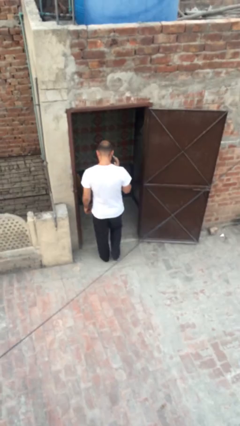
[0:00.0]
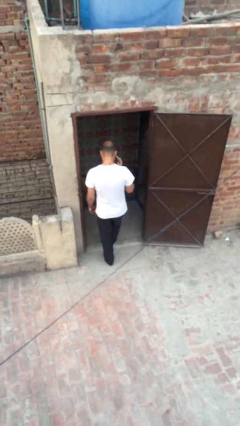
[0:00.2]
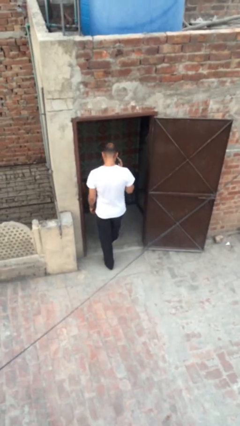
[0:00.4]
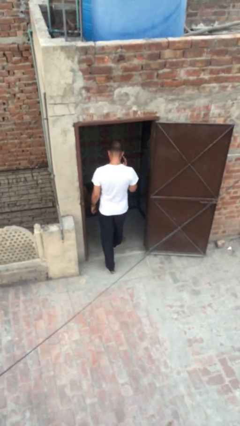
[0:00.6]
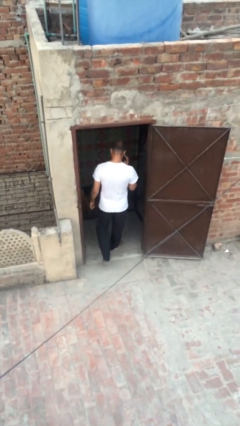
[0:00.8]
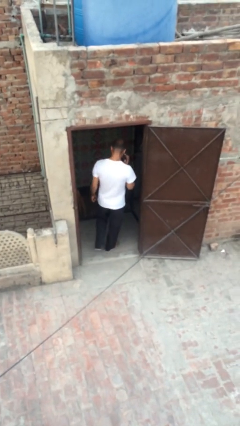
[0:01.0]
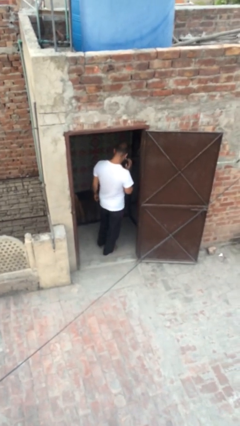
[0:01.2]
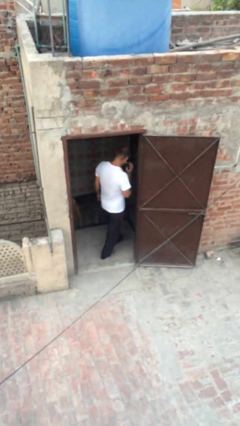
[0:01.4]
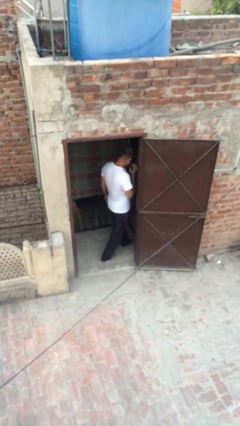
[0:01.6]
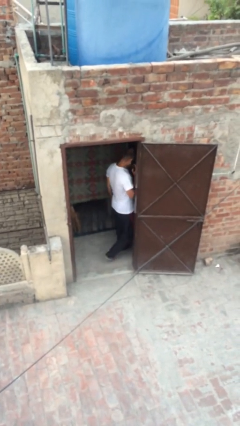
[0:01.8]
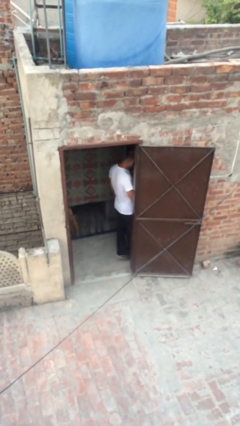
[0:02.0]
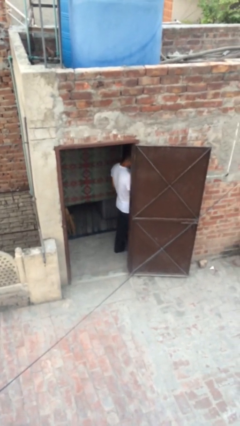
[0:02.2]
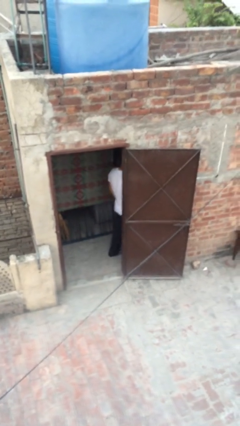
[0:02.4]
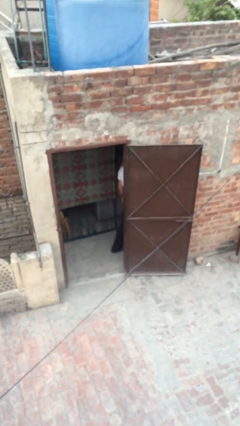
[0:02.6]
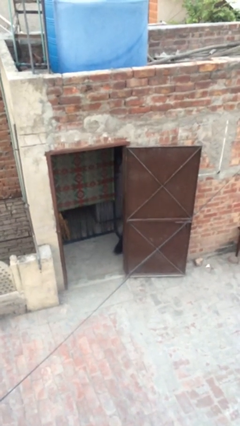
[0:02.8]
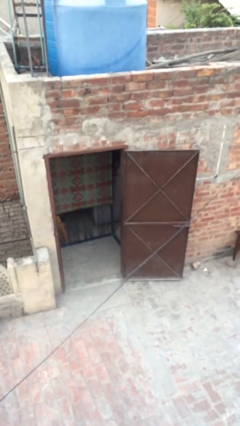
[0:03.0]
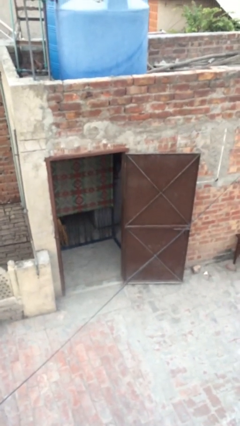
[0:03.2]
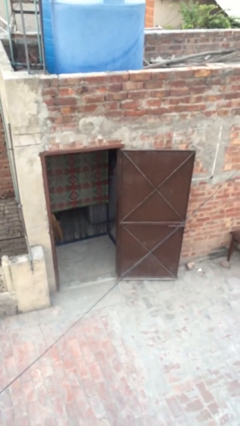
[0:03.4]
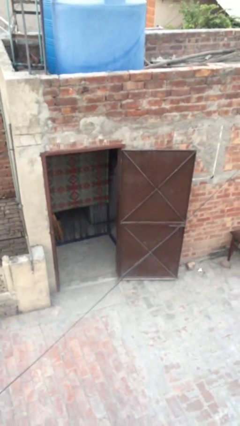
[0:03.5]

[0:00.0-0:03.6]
person exits scene through structure

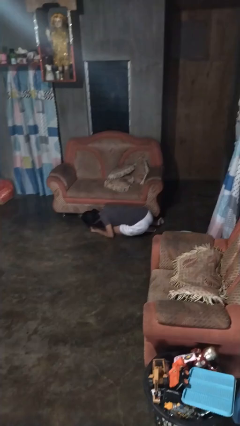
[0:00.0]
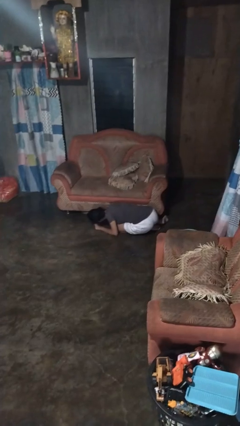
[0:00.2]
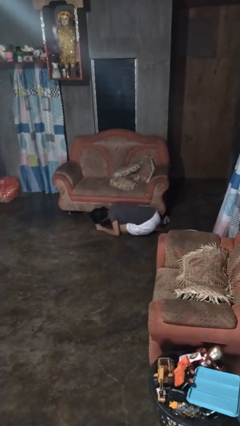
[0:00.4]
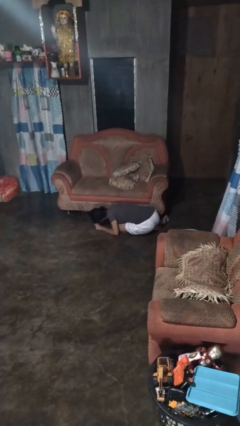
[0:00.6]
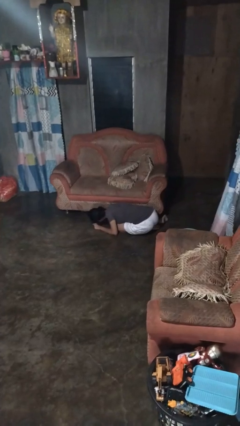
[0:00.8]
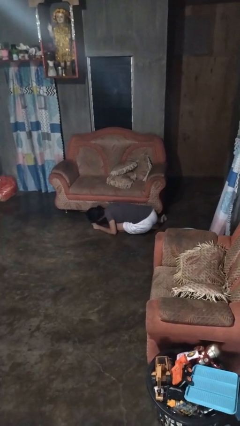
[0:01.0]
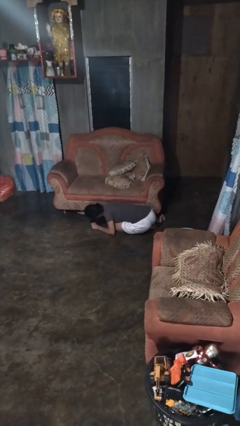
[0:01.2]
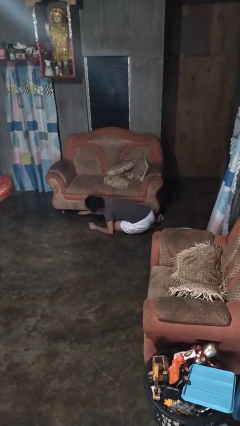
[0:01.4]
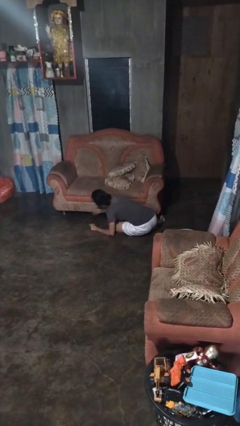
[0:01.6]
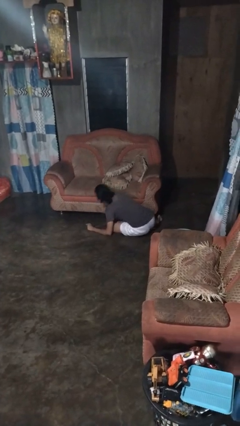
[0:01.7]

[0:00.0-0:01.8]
person searches under couch

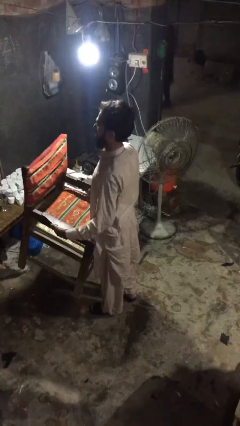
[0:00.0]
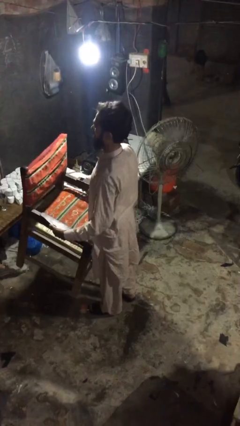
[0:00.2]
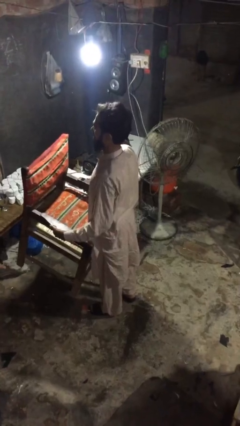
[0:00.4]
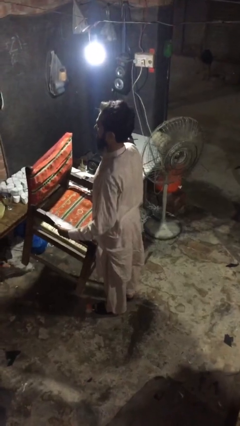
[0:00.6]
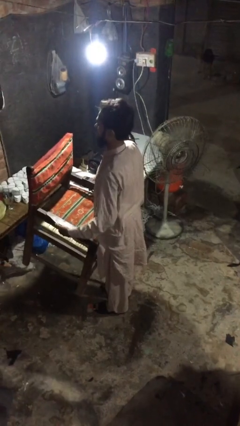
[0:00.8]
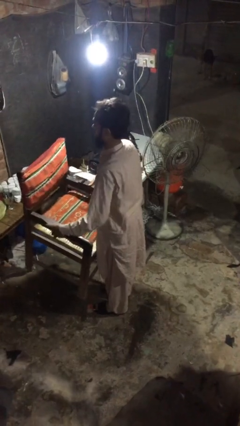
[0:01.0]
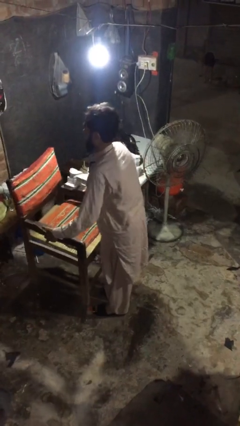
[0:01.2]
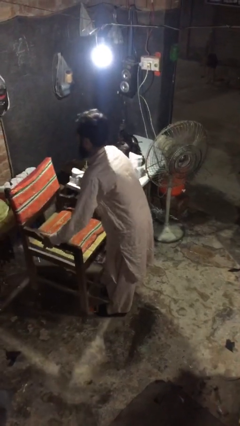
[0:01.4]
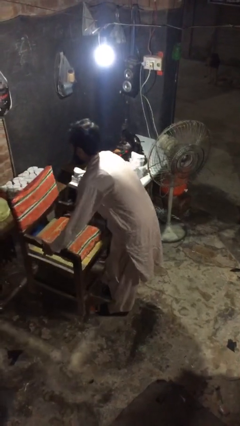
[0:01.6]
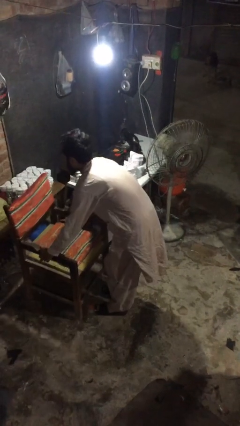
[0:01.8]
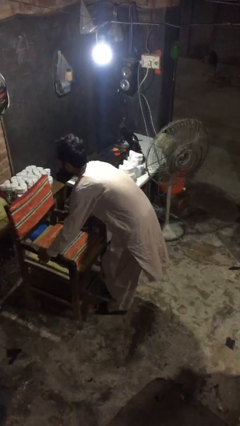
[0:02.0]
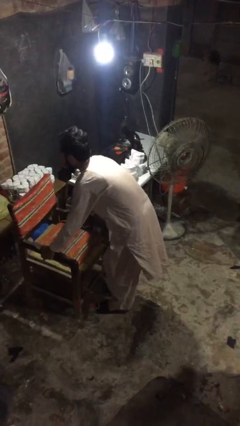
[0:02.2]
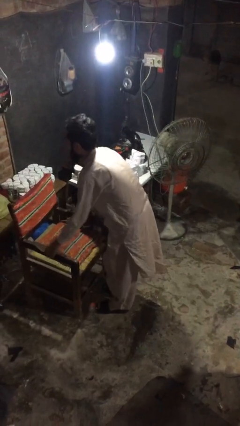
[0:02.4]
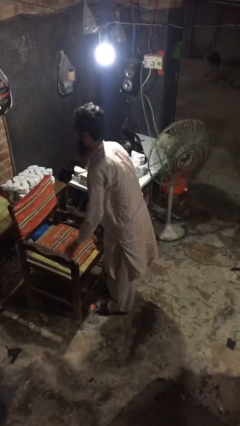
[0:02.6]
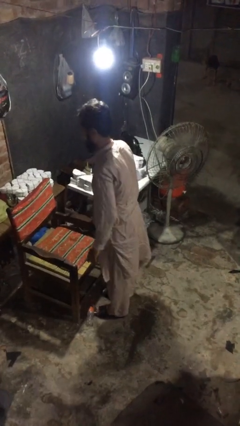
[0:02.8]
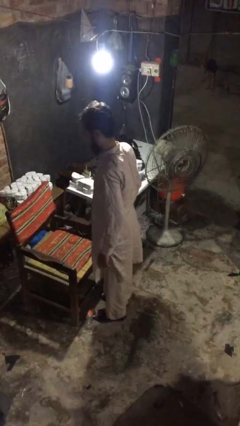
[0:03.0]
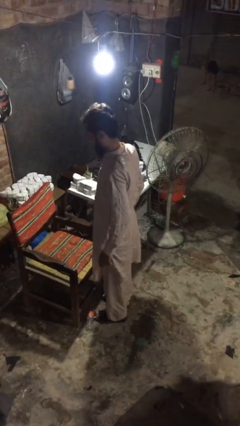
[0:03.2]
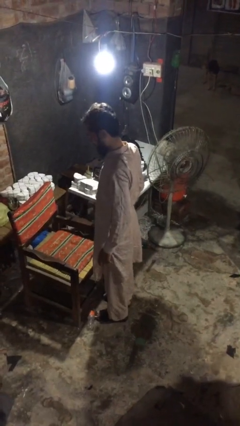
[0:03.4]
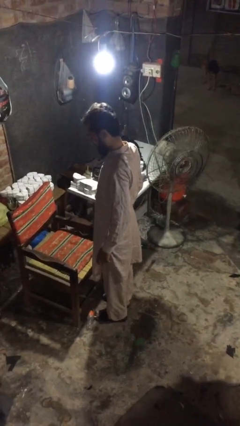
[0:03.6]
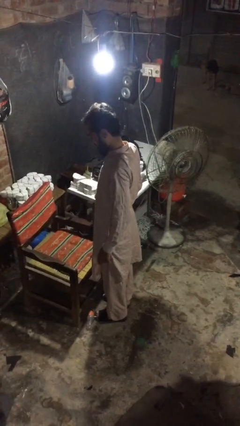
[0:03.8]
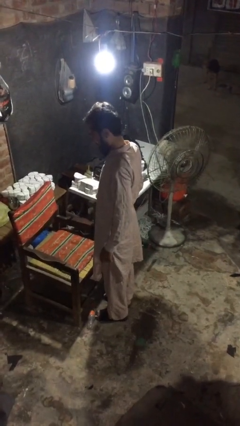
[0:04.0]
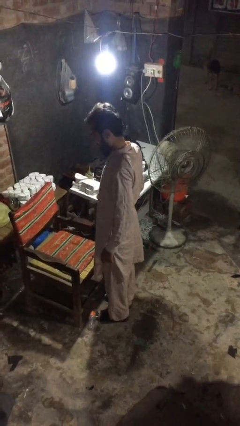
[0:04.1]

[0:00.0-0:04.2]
person puts down object on floor

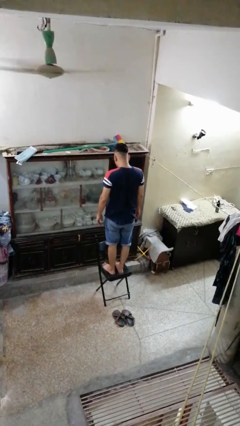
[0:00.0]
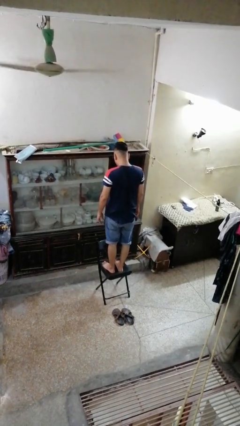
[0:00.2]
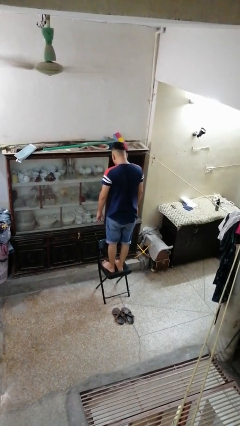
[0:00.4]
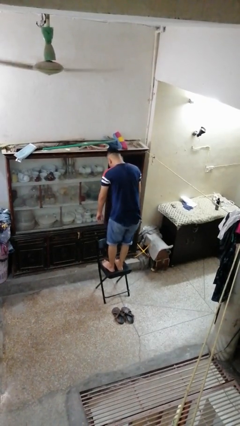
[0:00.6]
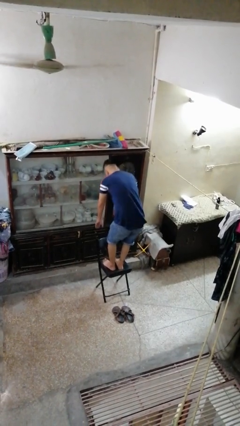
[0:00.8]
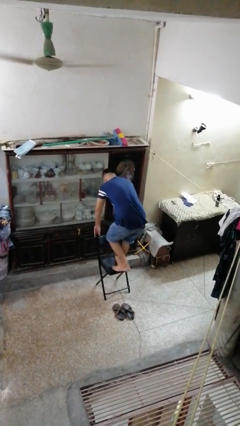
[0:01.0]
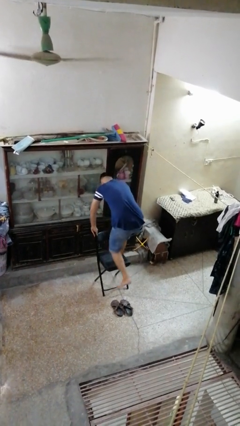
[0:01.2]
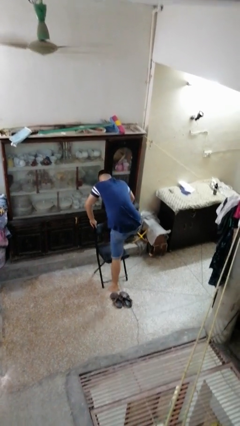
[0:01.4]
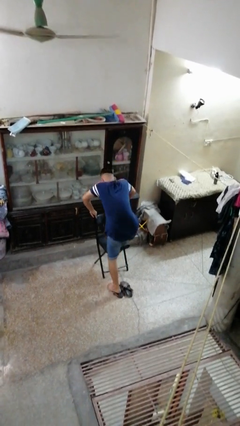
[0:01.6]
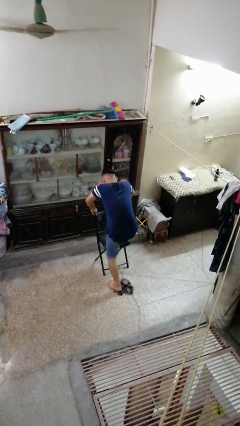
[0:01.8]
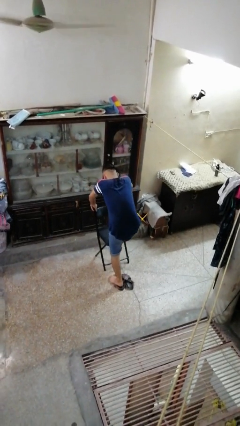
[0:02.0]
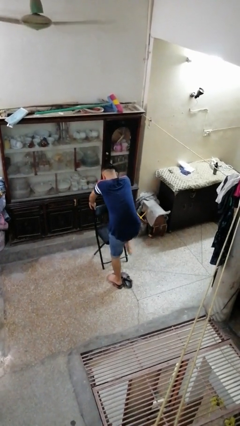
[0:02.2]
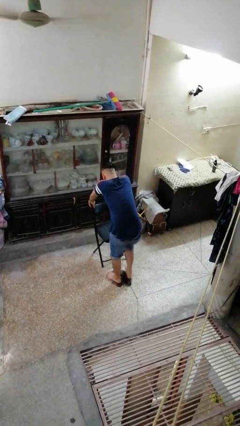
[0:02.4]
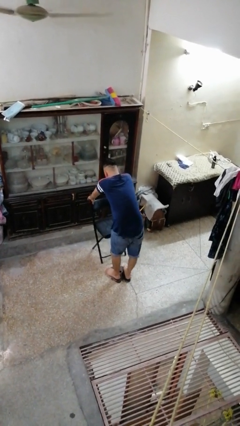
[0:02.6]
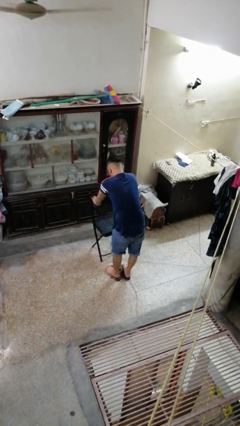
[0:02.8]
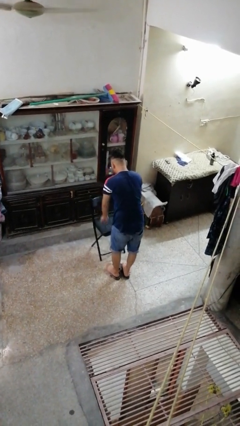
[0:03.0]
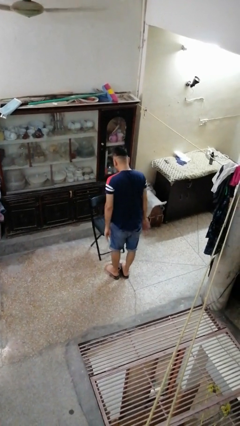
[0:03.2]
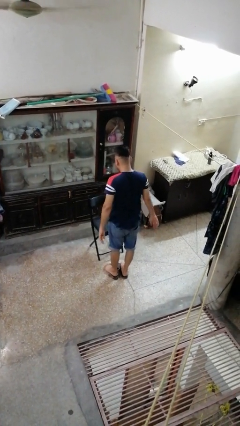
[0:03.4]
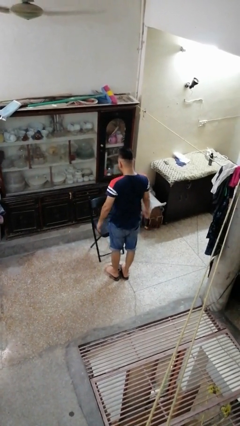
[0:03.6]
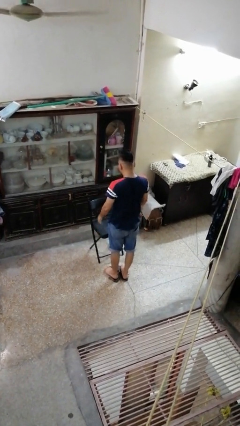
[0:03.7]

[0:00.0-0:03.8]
person climbs off chair

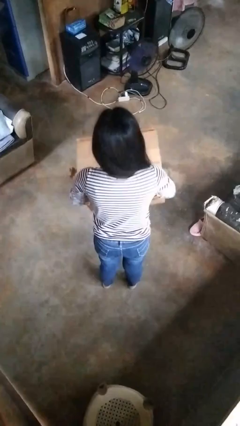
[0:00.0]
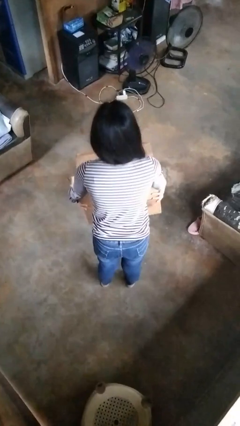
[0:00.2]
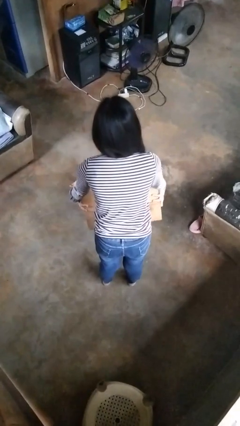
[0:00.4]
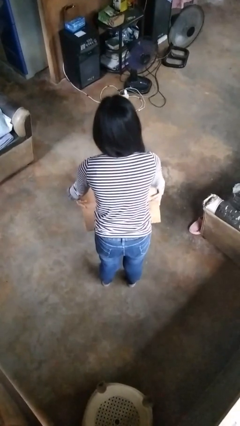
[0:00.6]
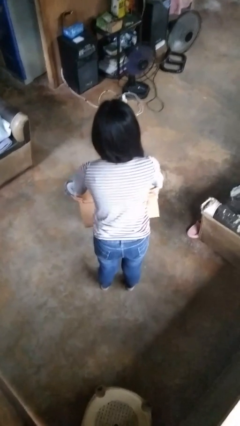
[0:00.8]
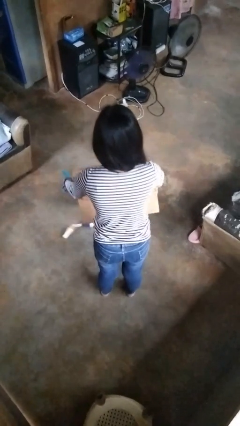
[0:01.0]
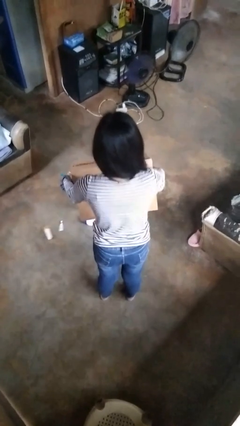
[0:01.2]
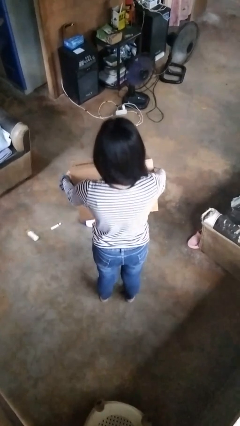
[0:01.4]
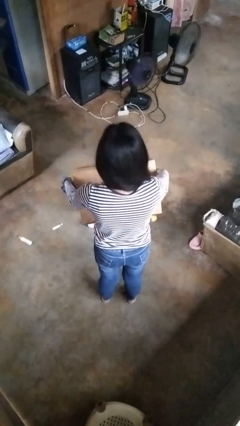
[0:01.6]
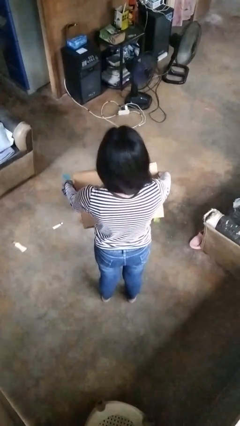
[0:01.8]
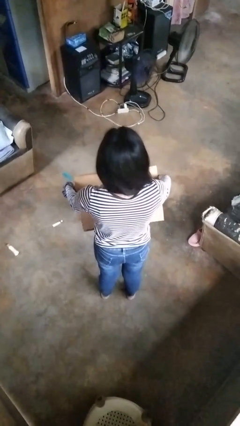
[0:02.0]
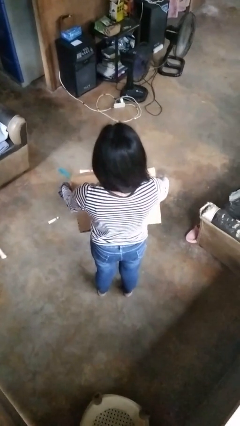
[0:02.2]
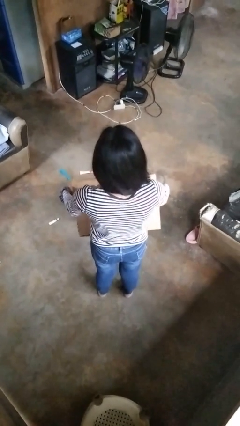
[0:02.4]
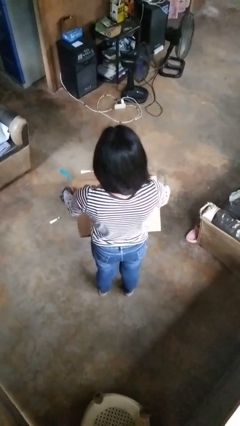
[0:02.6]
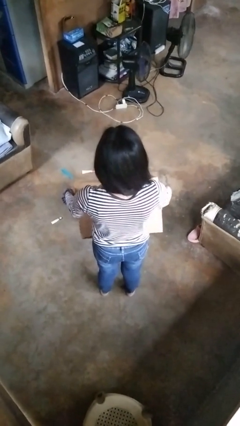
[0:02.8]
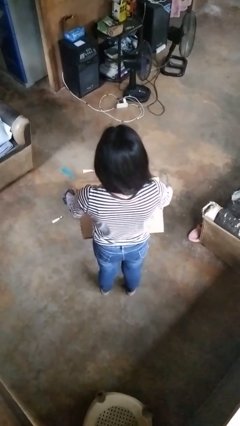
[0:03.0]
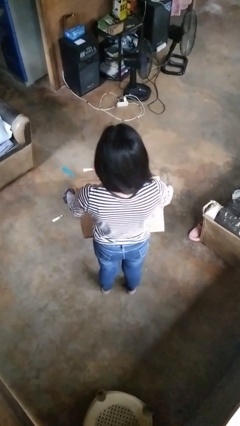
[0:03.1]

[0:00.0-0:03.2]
person unloads box onto floor
